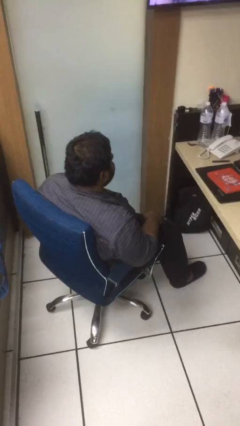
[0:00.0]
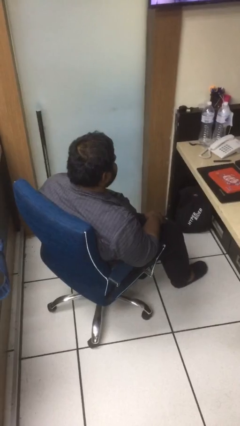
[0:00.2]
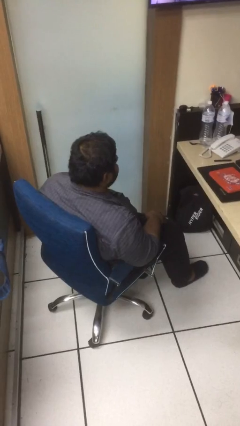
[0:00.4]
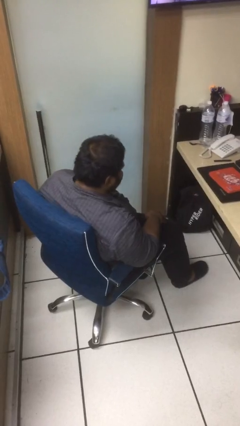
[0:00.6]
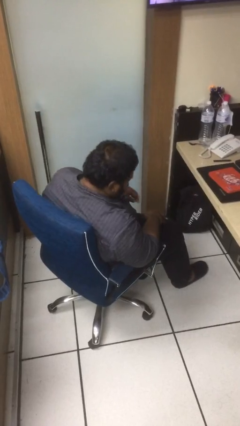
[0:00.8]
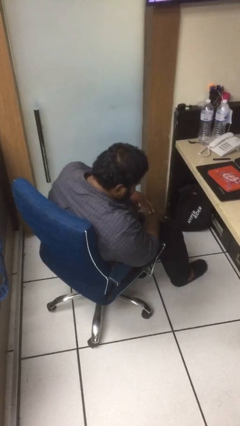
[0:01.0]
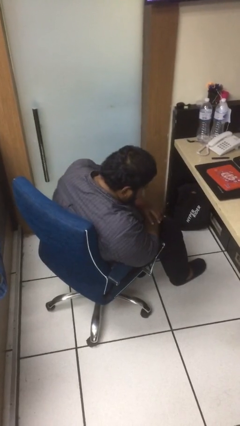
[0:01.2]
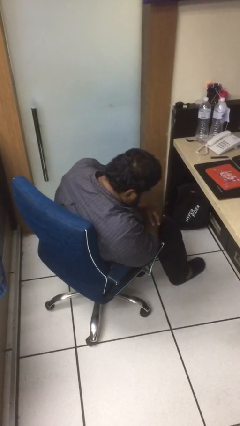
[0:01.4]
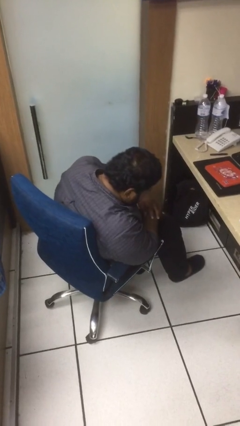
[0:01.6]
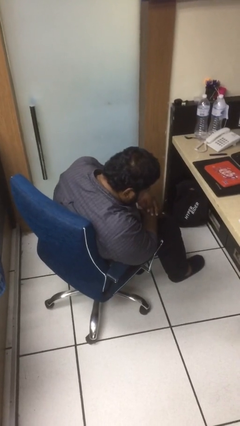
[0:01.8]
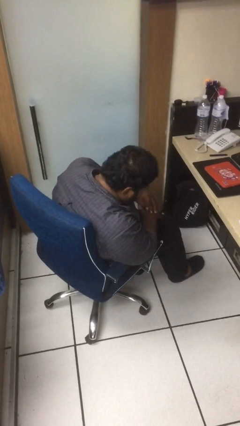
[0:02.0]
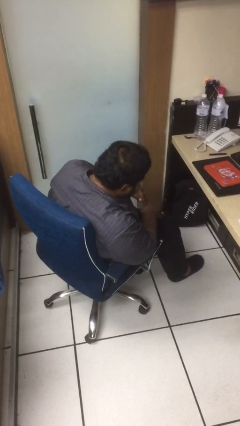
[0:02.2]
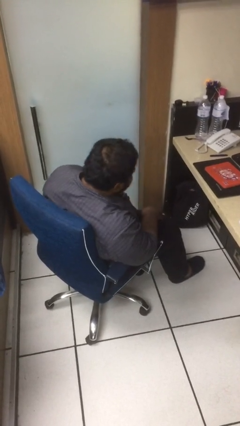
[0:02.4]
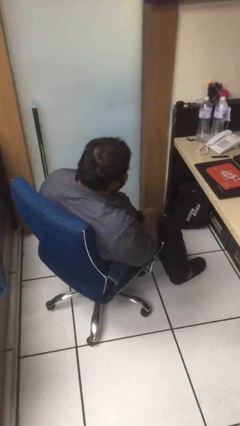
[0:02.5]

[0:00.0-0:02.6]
person looks at hands in lap

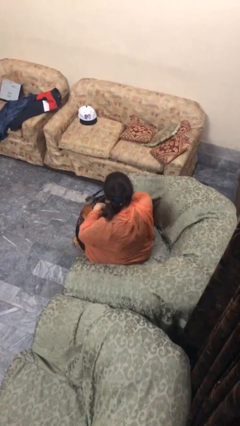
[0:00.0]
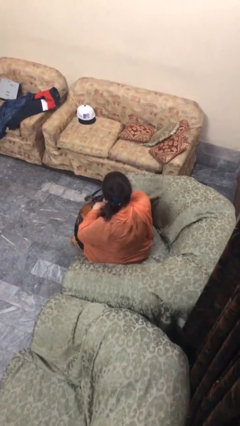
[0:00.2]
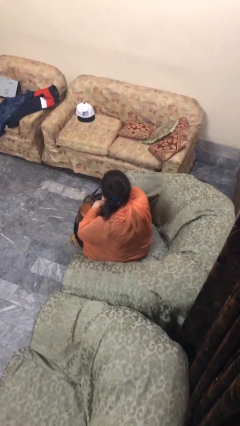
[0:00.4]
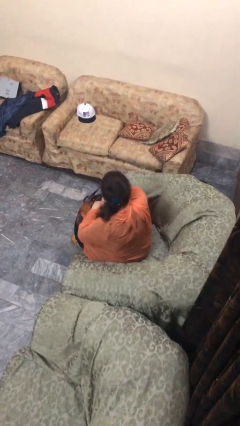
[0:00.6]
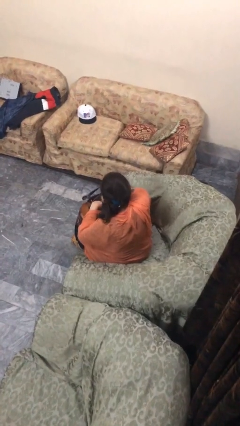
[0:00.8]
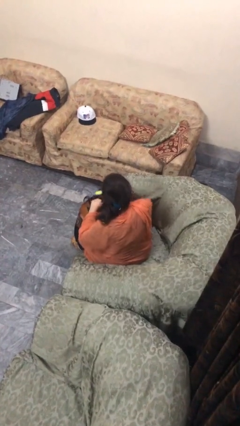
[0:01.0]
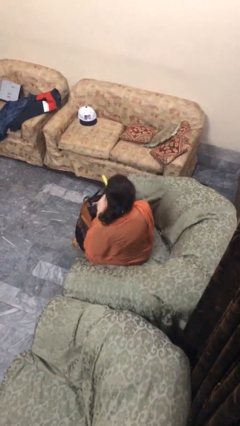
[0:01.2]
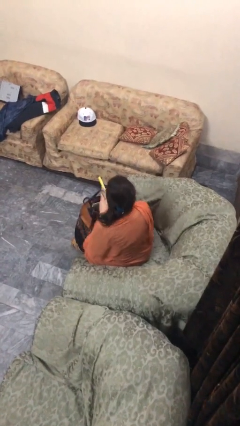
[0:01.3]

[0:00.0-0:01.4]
person takes object from purse

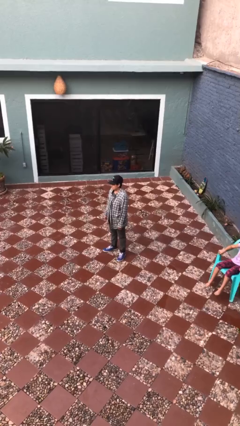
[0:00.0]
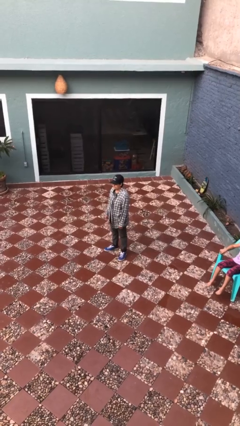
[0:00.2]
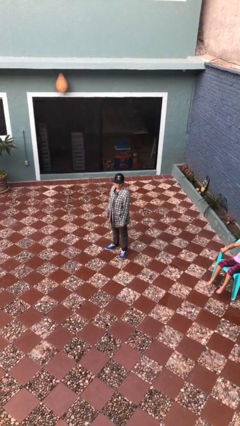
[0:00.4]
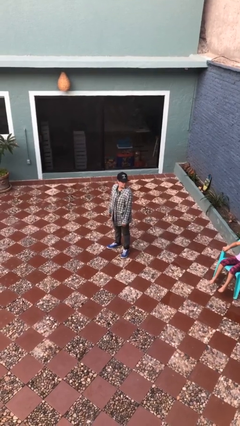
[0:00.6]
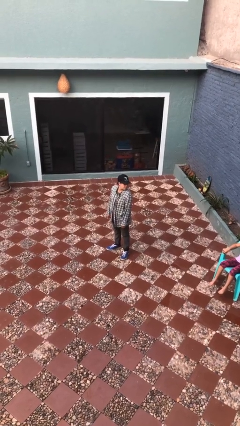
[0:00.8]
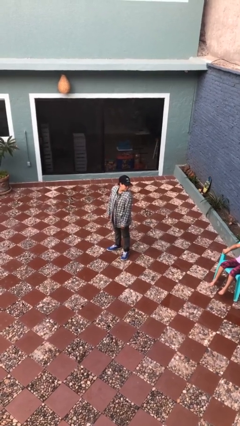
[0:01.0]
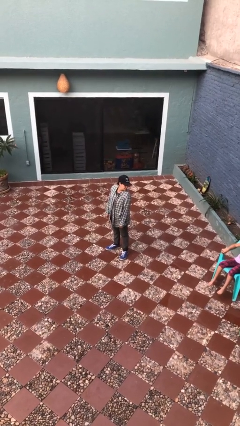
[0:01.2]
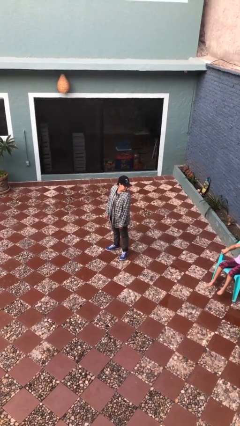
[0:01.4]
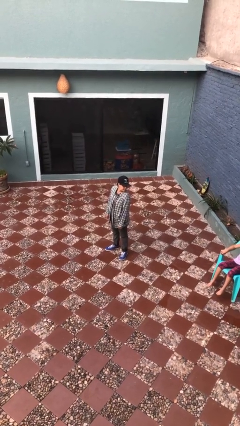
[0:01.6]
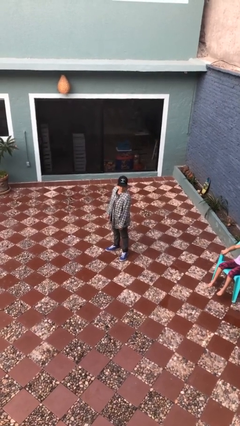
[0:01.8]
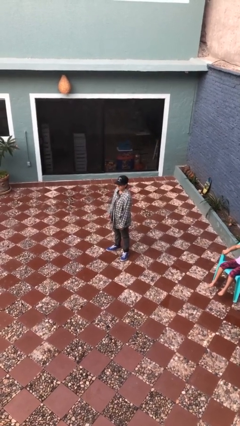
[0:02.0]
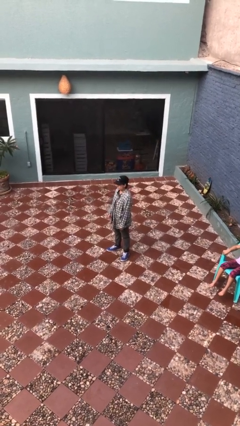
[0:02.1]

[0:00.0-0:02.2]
person looks over shoulder

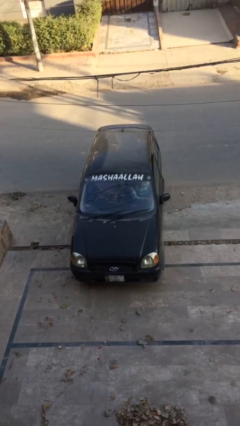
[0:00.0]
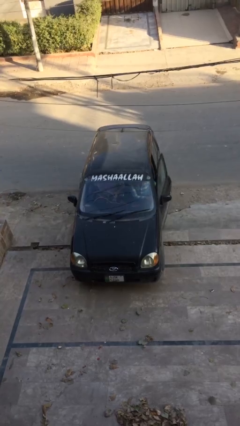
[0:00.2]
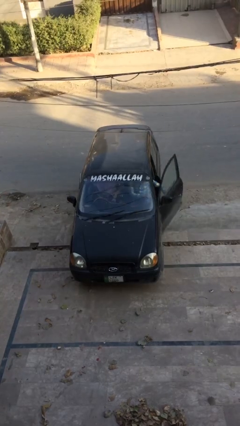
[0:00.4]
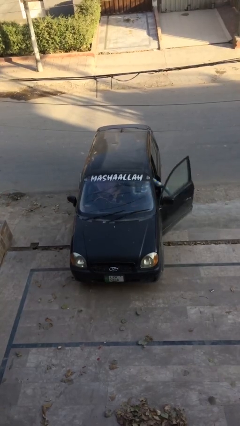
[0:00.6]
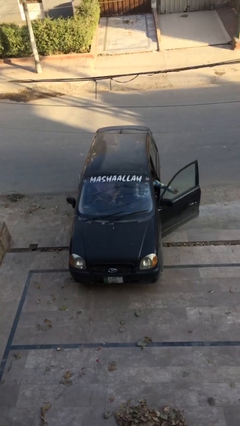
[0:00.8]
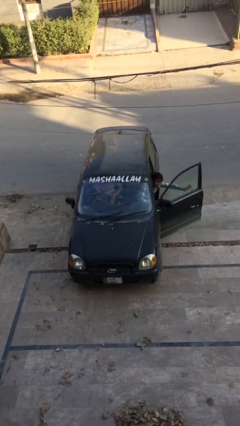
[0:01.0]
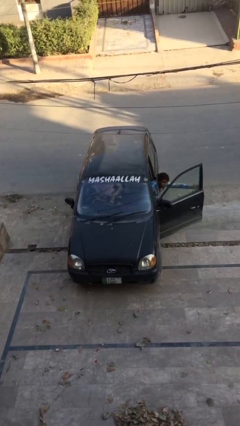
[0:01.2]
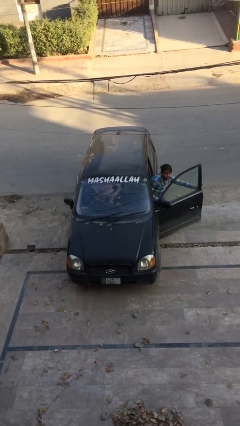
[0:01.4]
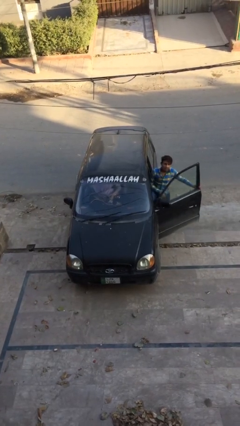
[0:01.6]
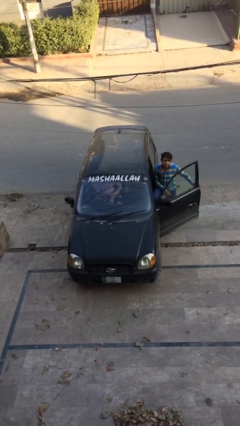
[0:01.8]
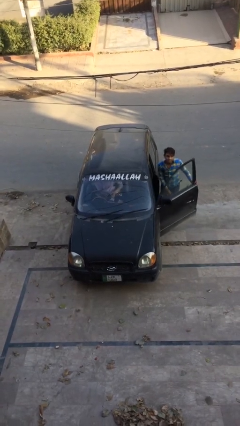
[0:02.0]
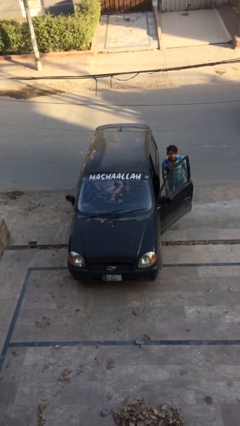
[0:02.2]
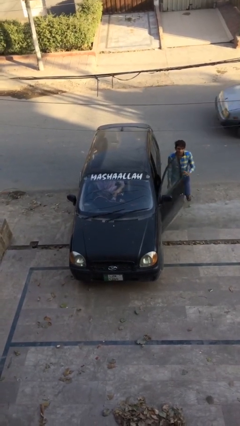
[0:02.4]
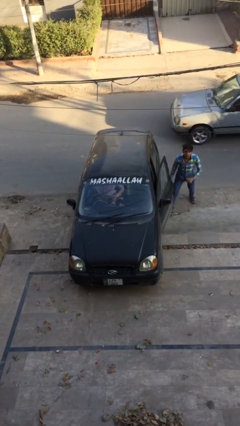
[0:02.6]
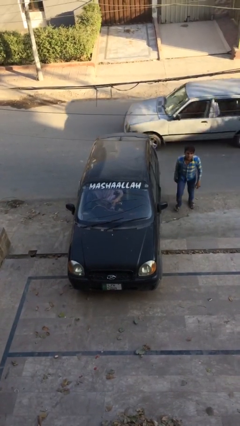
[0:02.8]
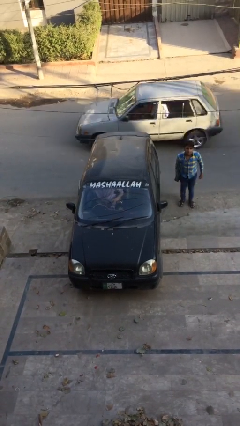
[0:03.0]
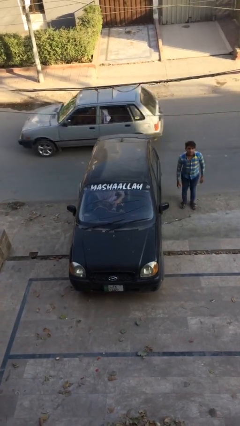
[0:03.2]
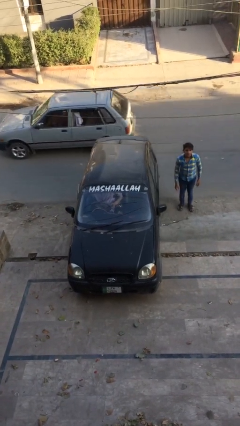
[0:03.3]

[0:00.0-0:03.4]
car drops off person

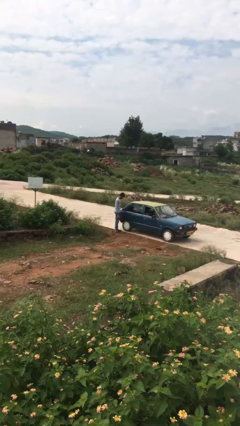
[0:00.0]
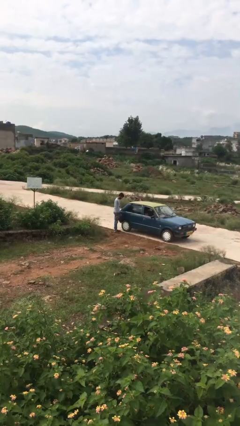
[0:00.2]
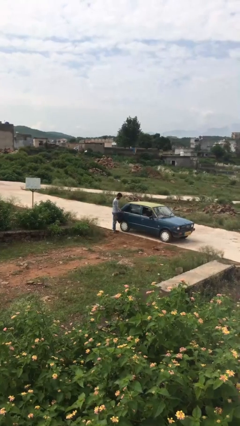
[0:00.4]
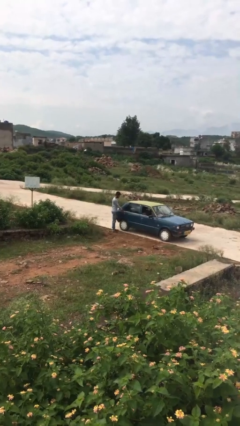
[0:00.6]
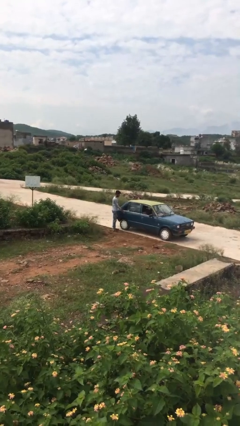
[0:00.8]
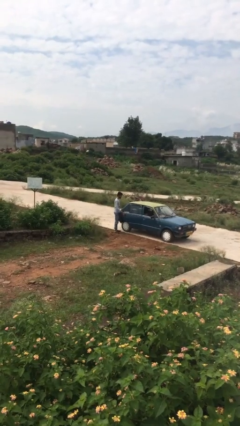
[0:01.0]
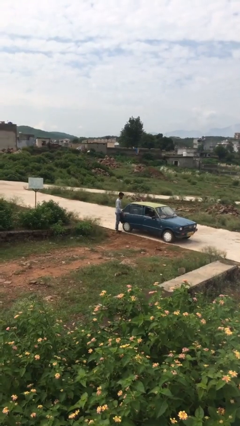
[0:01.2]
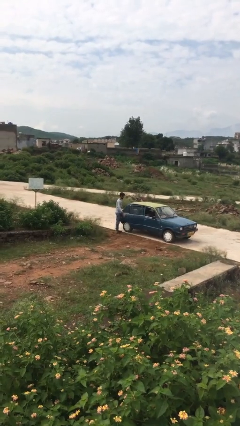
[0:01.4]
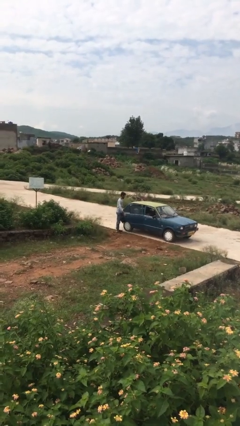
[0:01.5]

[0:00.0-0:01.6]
person opens car door

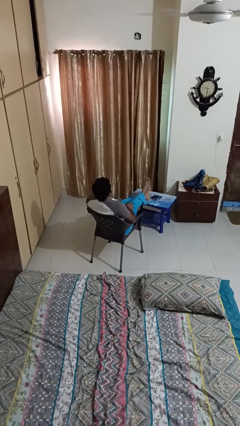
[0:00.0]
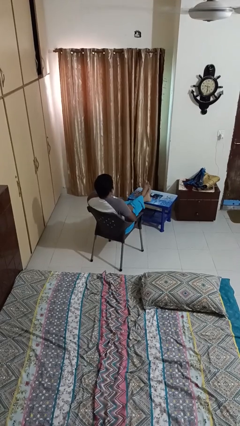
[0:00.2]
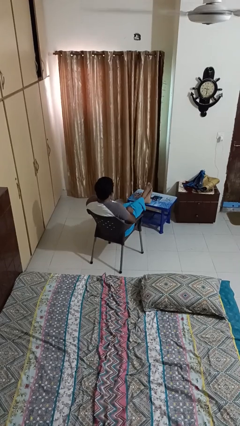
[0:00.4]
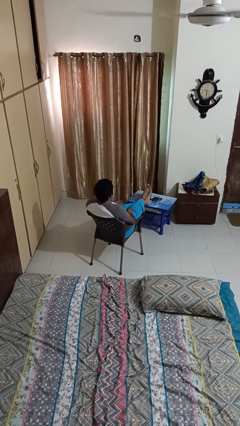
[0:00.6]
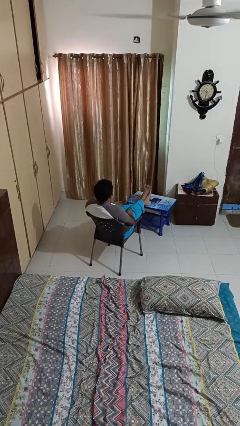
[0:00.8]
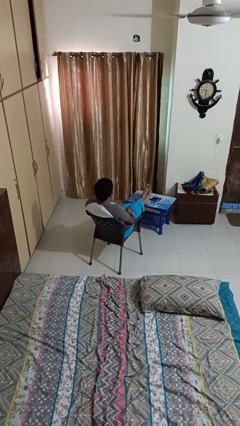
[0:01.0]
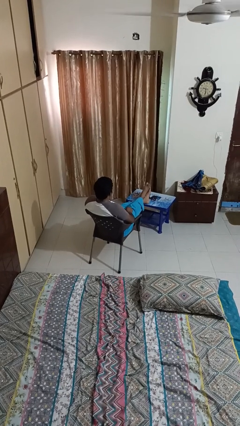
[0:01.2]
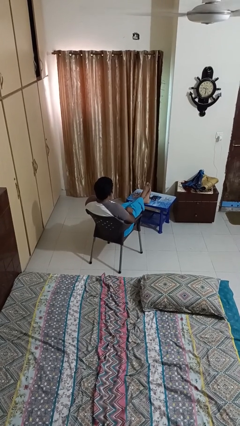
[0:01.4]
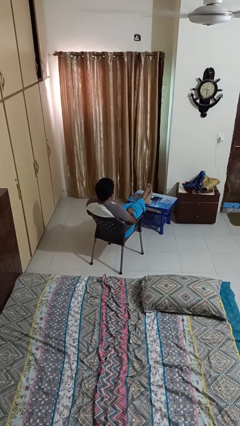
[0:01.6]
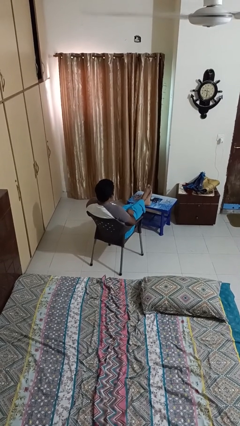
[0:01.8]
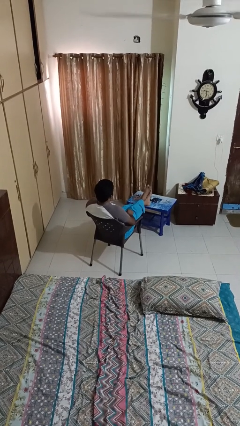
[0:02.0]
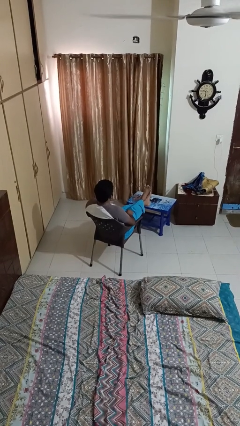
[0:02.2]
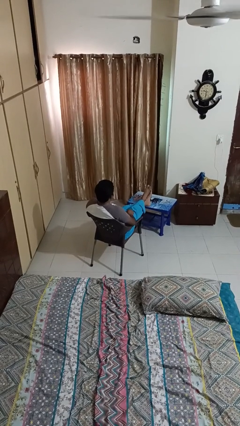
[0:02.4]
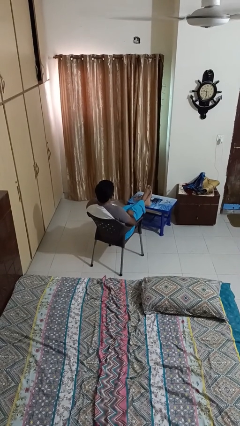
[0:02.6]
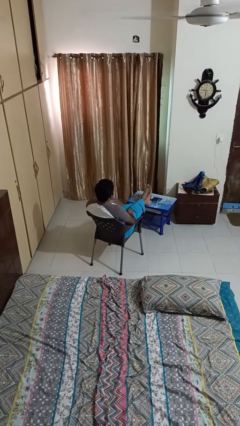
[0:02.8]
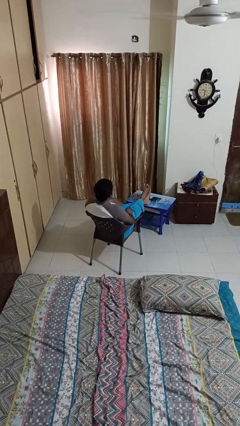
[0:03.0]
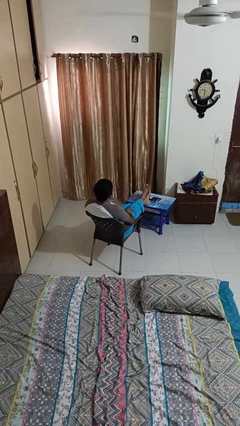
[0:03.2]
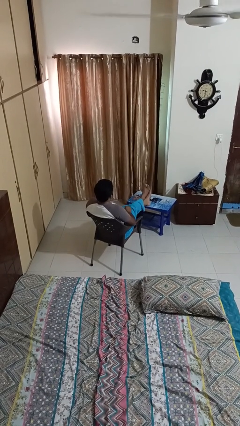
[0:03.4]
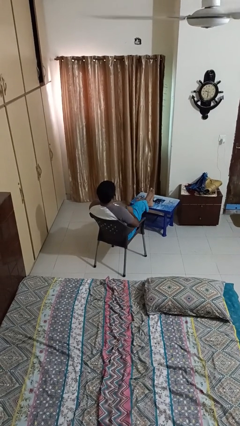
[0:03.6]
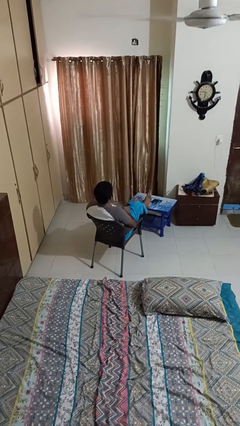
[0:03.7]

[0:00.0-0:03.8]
person puts feet up

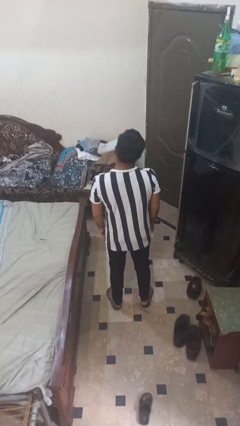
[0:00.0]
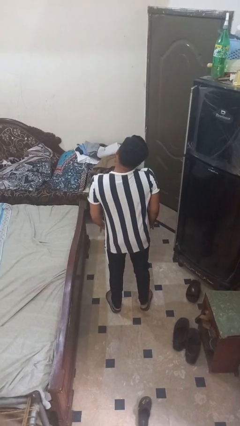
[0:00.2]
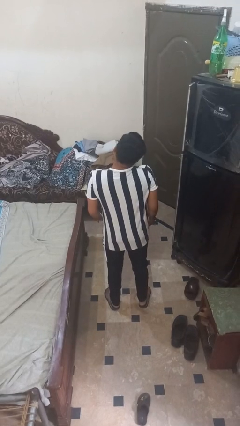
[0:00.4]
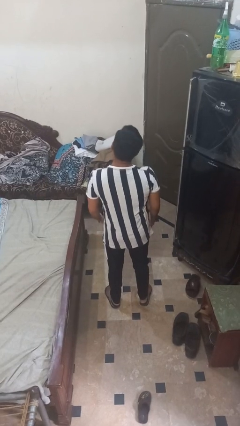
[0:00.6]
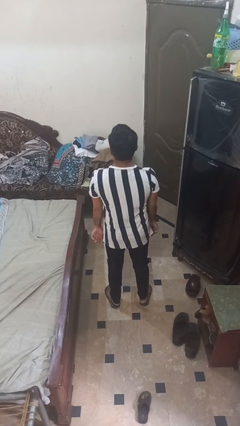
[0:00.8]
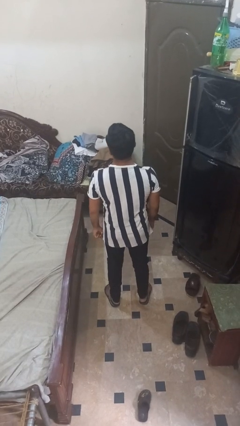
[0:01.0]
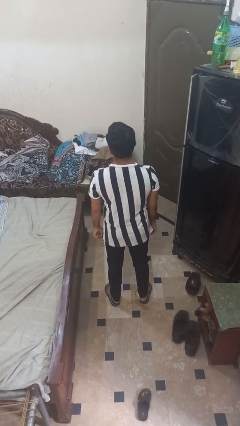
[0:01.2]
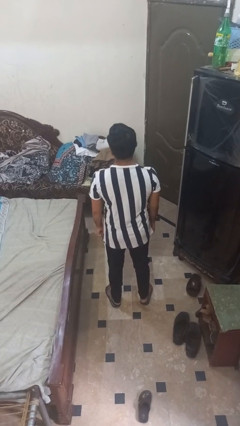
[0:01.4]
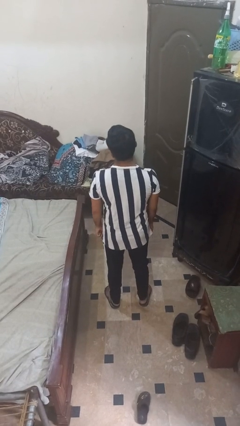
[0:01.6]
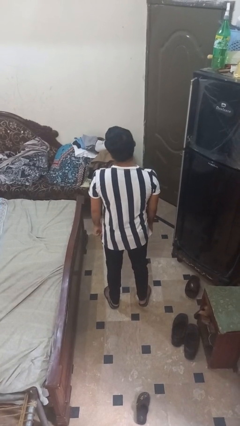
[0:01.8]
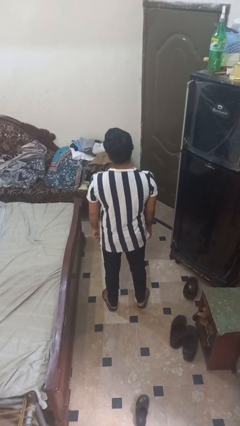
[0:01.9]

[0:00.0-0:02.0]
person shrugs
